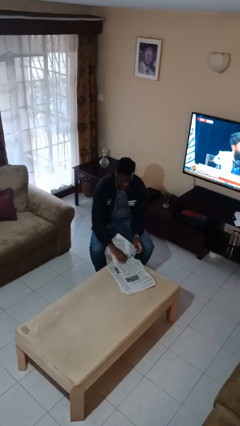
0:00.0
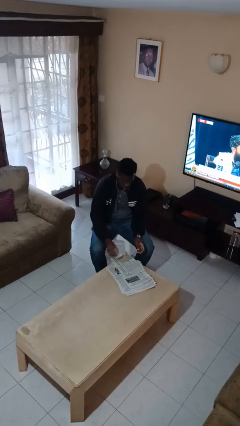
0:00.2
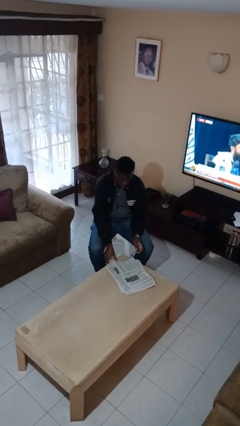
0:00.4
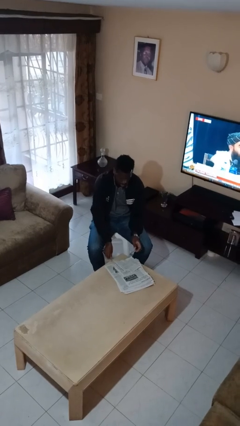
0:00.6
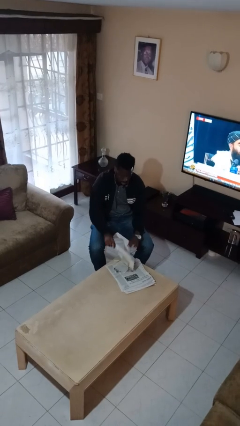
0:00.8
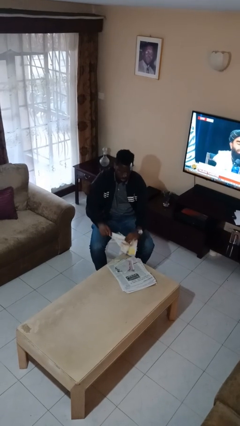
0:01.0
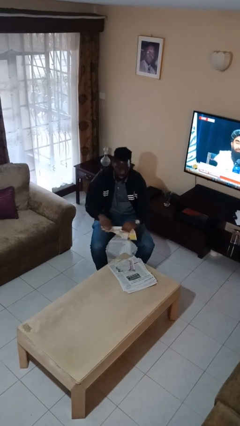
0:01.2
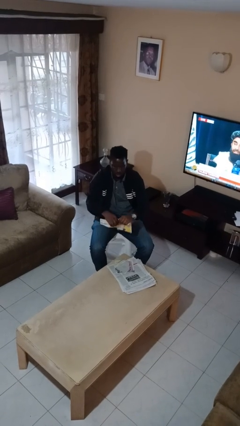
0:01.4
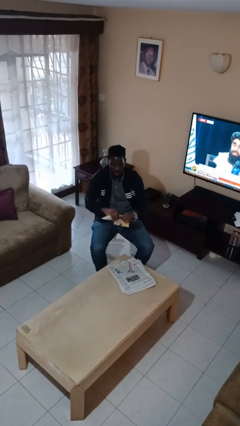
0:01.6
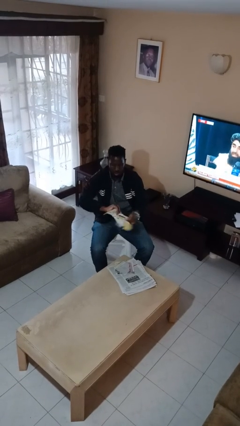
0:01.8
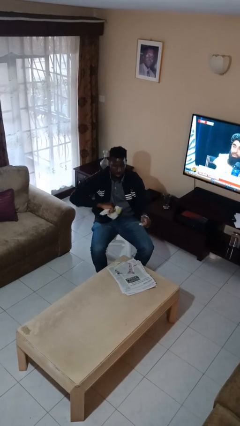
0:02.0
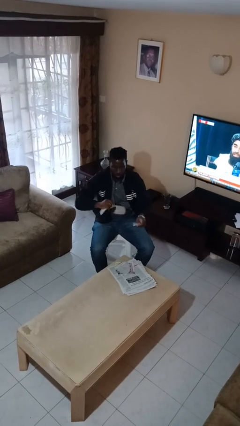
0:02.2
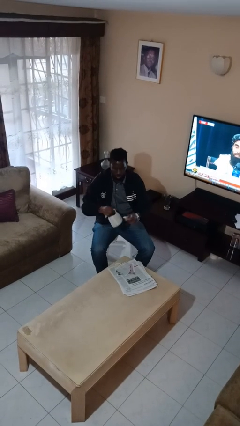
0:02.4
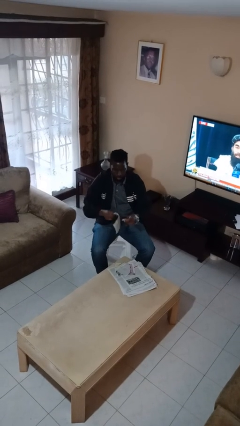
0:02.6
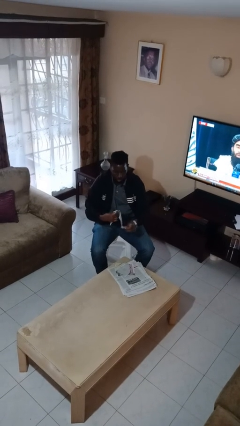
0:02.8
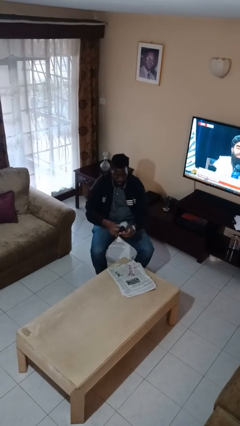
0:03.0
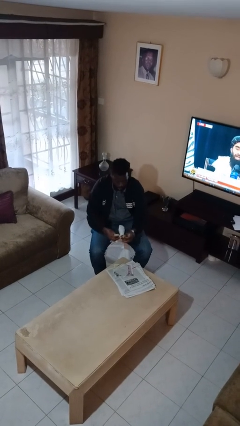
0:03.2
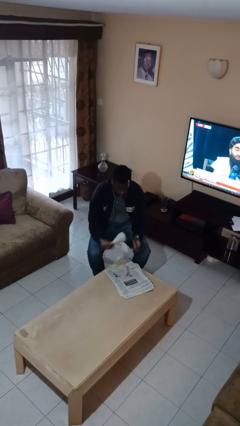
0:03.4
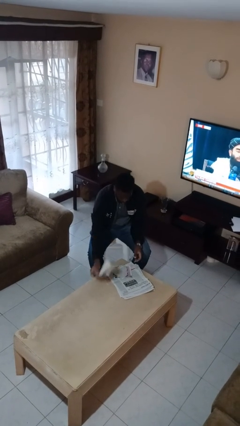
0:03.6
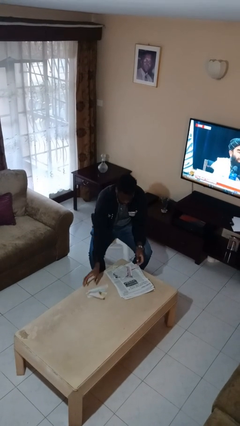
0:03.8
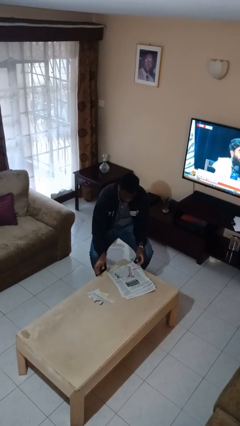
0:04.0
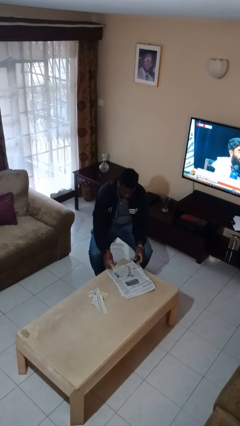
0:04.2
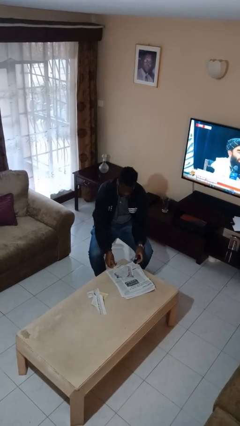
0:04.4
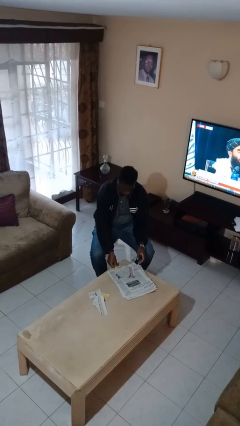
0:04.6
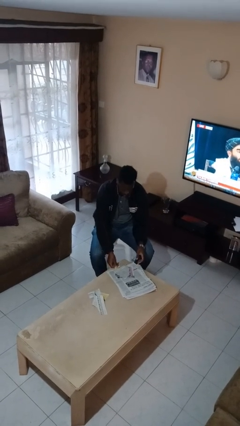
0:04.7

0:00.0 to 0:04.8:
person tears paper

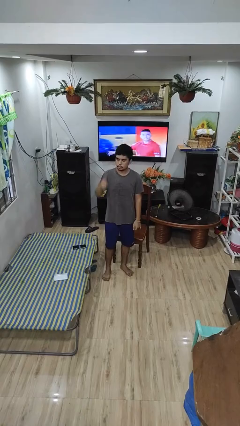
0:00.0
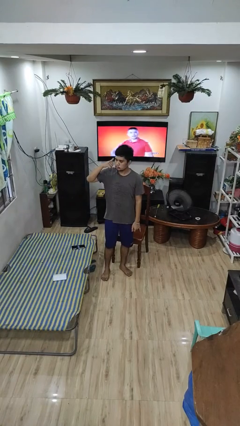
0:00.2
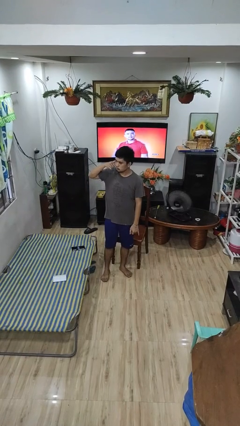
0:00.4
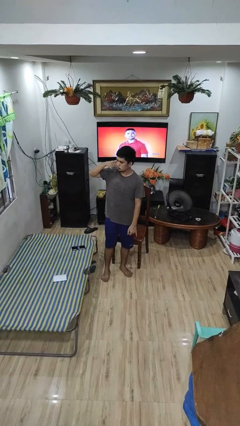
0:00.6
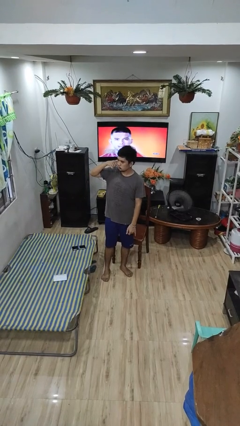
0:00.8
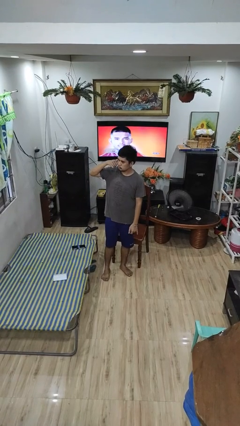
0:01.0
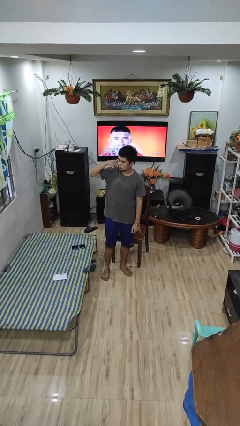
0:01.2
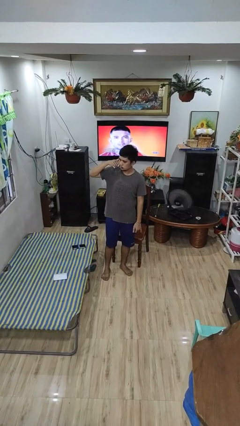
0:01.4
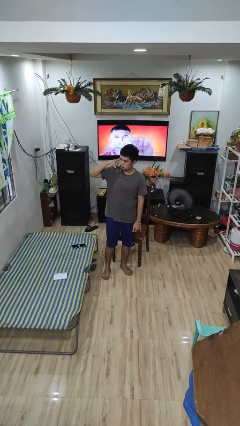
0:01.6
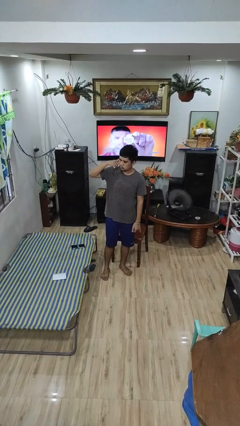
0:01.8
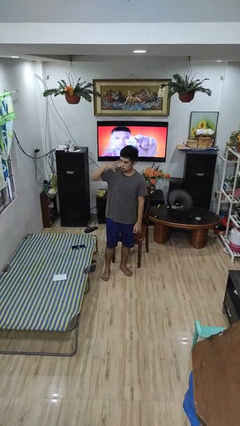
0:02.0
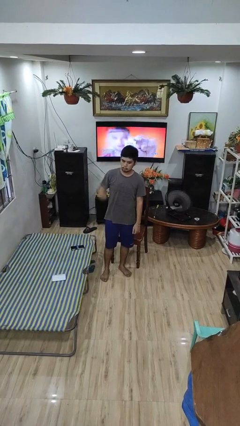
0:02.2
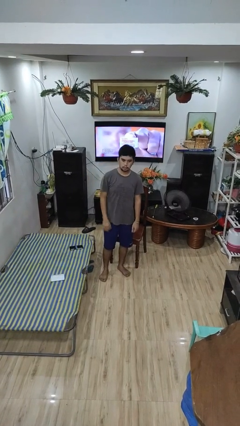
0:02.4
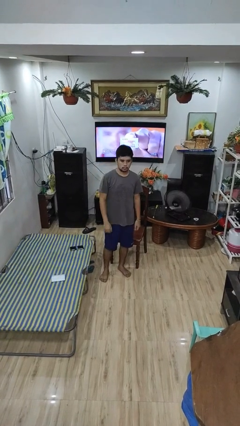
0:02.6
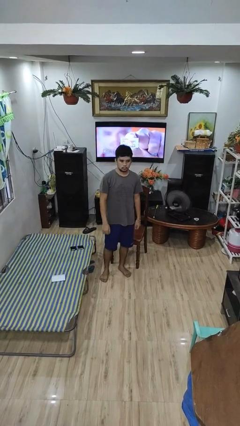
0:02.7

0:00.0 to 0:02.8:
person gestures call me

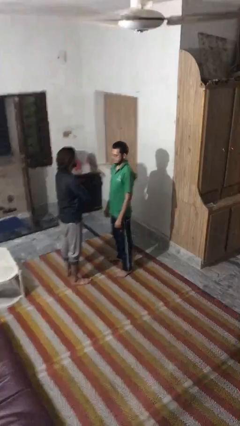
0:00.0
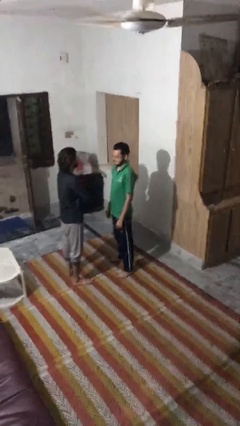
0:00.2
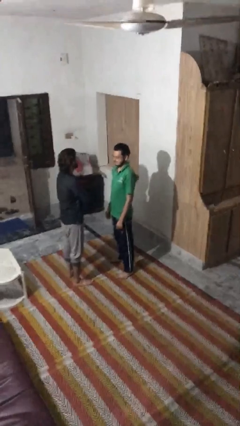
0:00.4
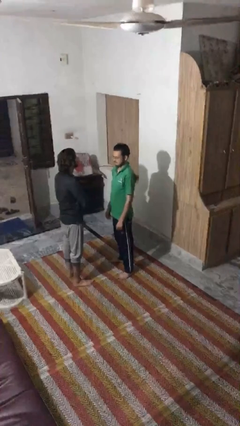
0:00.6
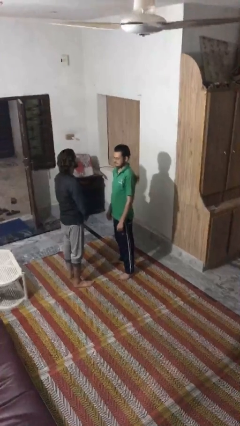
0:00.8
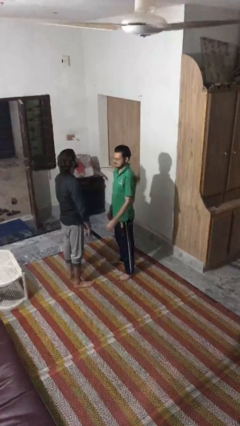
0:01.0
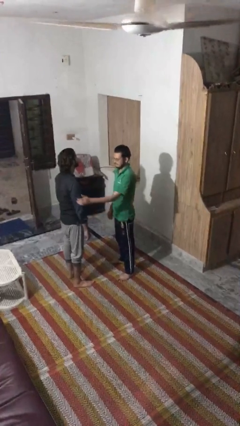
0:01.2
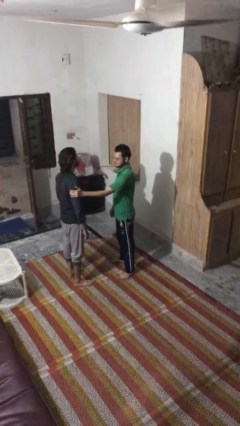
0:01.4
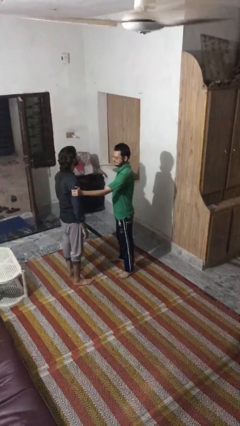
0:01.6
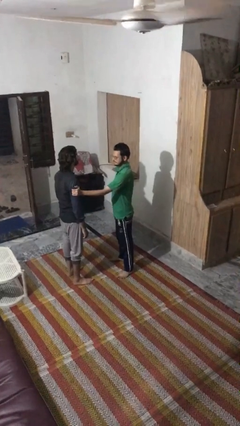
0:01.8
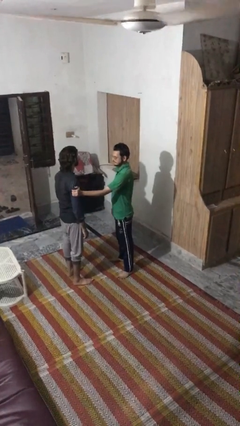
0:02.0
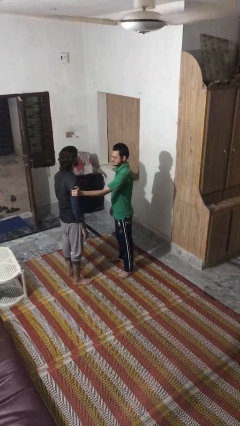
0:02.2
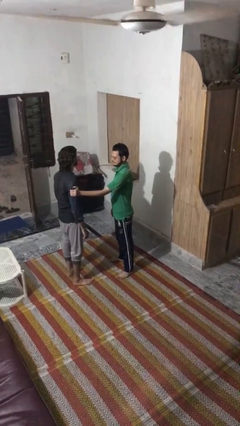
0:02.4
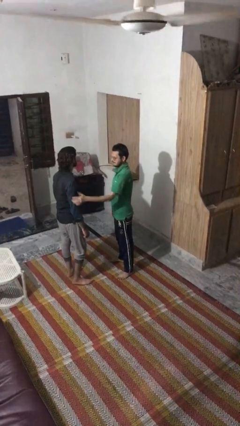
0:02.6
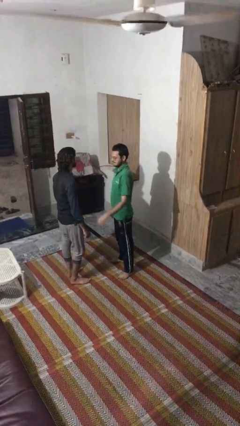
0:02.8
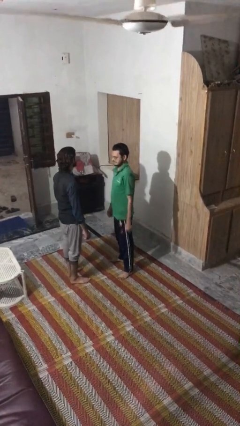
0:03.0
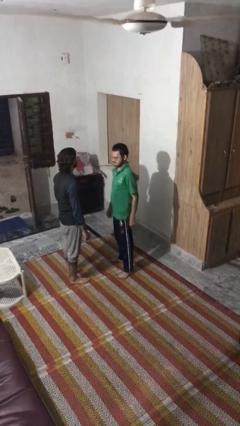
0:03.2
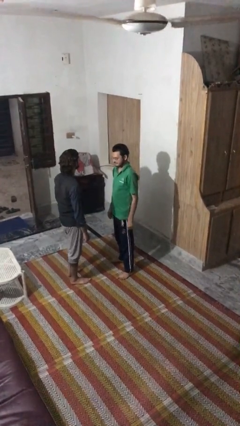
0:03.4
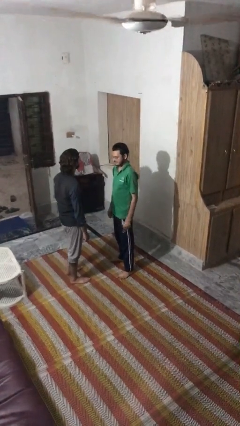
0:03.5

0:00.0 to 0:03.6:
person grabs person by bicep

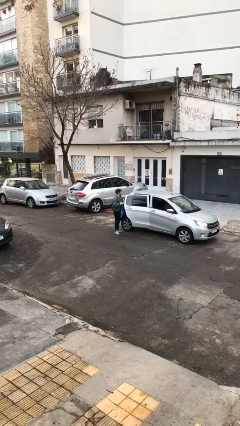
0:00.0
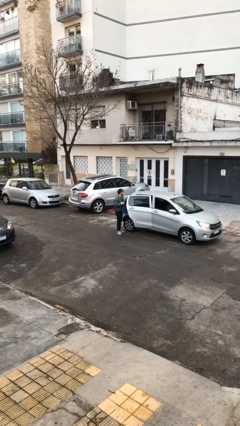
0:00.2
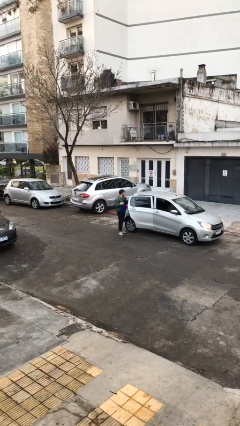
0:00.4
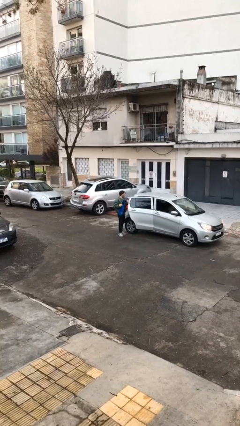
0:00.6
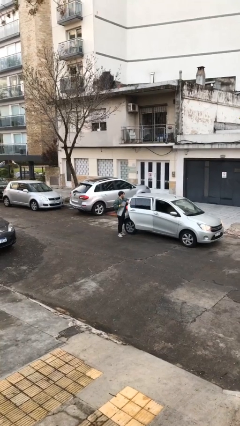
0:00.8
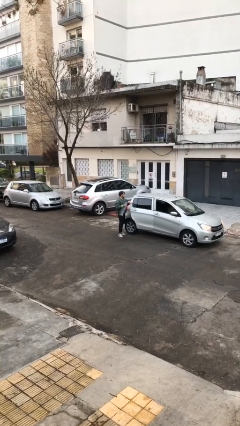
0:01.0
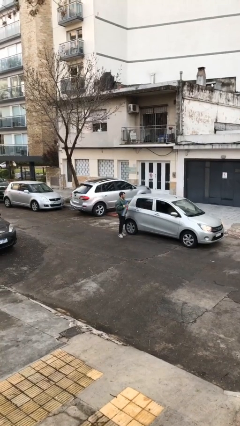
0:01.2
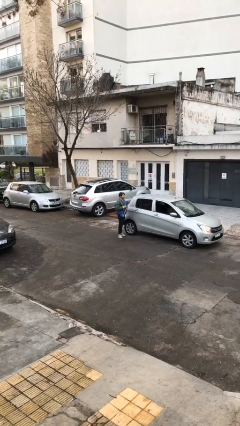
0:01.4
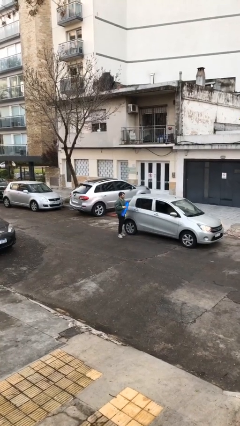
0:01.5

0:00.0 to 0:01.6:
person closes car door

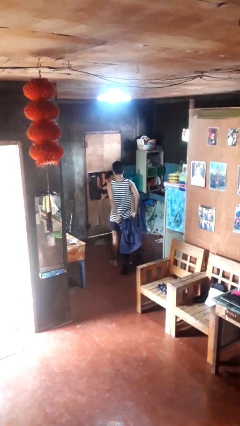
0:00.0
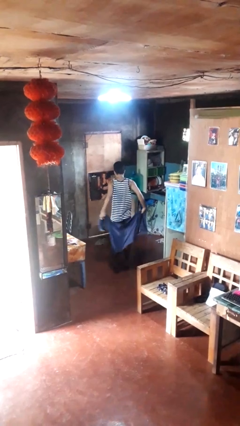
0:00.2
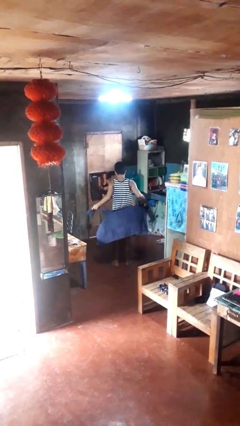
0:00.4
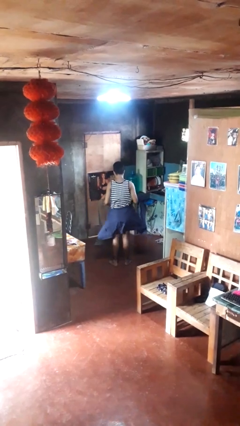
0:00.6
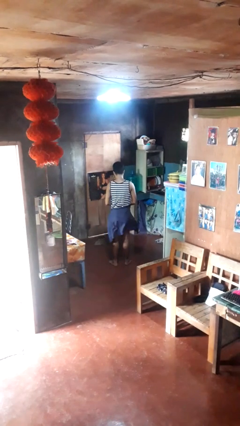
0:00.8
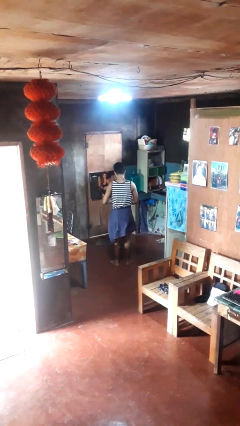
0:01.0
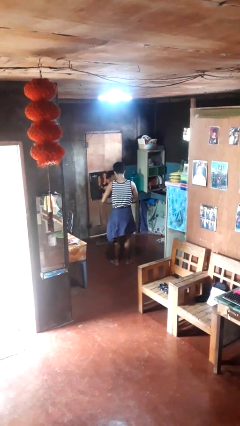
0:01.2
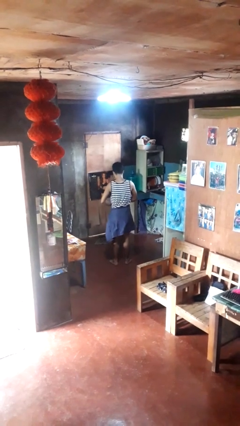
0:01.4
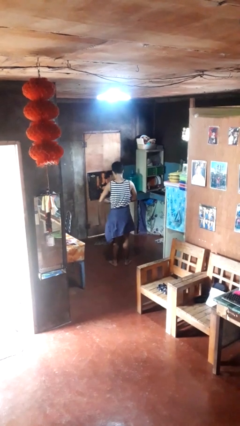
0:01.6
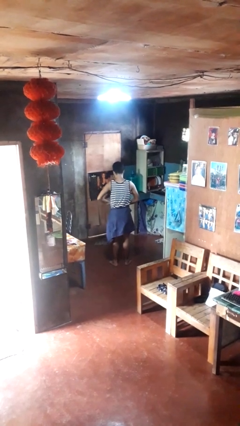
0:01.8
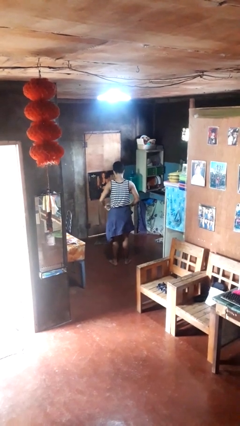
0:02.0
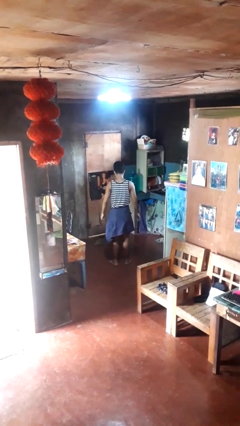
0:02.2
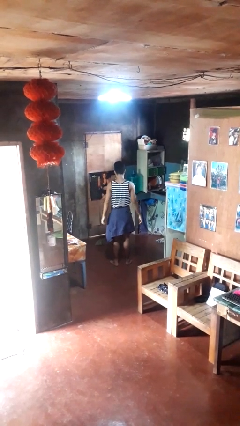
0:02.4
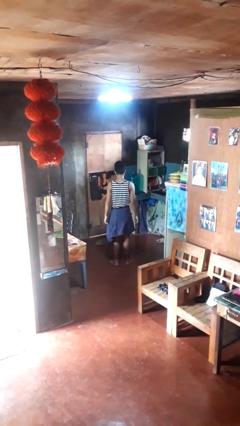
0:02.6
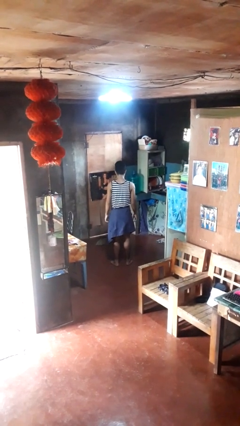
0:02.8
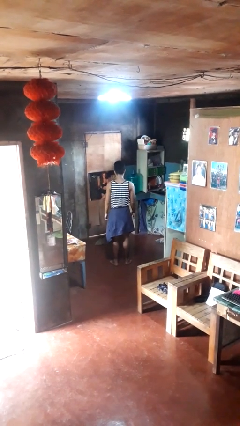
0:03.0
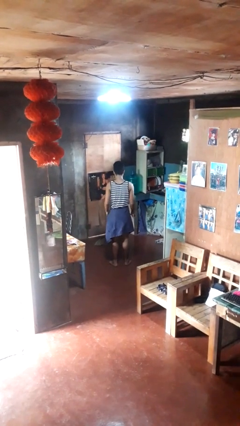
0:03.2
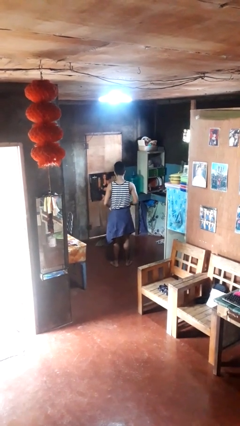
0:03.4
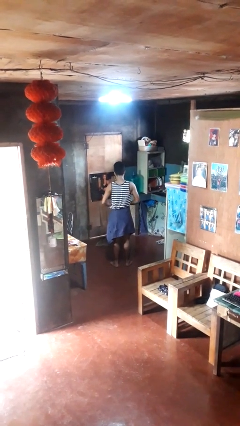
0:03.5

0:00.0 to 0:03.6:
person ties jacket around waist

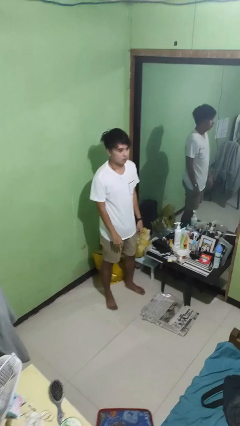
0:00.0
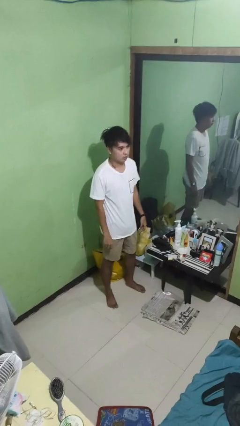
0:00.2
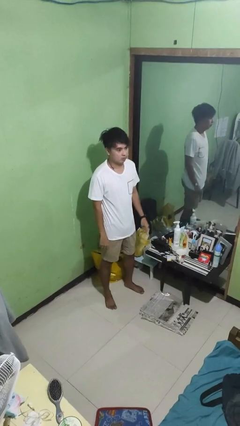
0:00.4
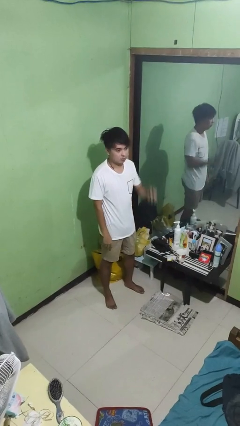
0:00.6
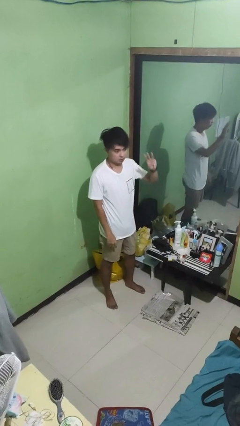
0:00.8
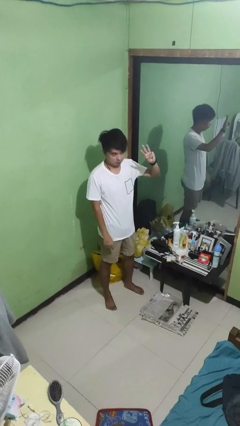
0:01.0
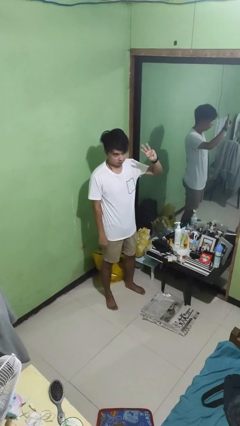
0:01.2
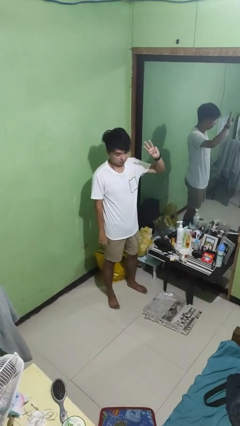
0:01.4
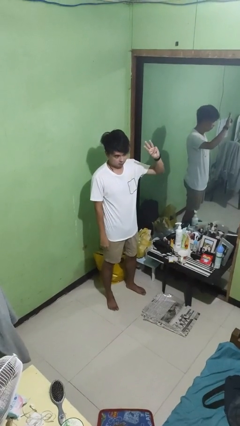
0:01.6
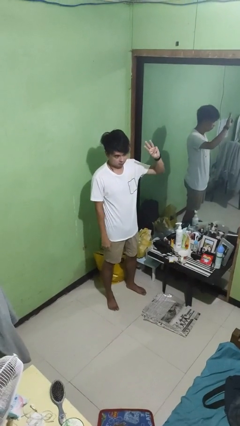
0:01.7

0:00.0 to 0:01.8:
person gestures number three
